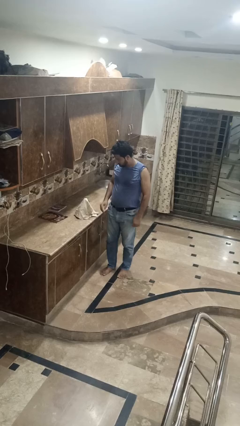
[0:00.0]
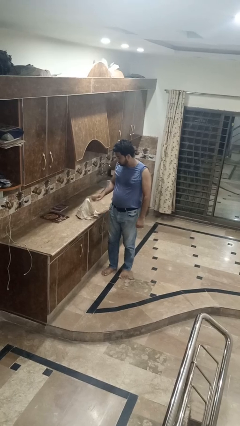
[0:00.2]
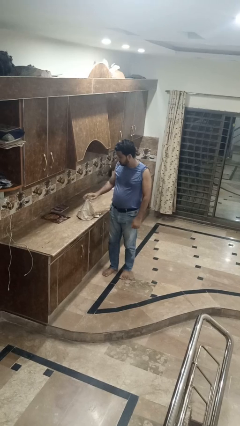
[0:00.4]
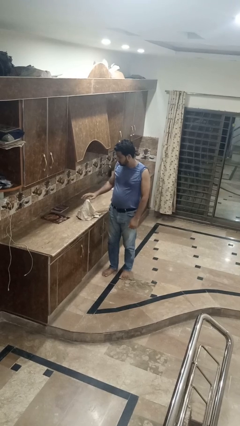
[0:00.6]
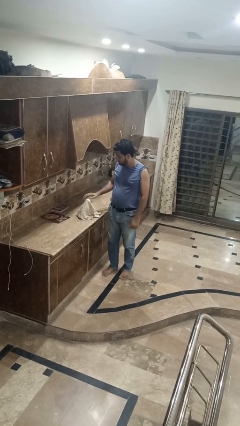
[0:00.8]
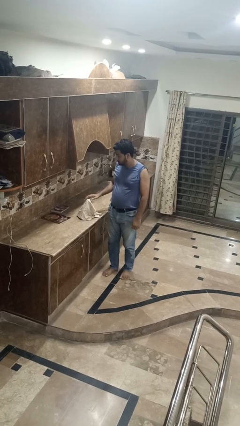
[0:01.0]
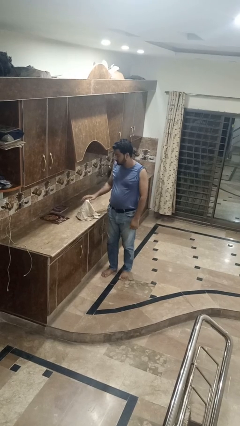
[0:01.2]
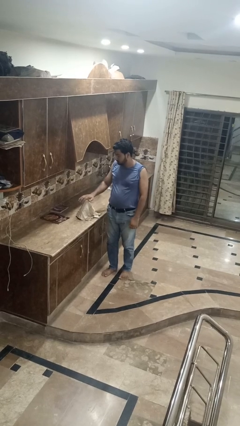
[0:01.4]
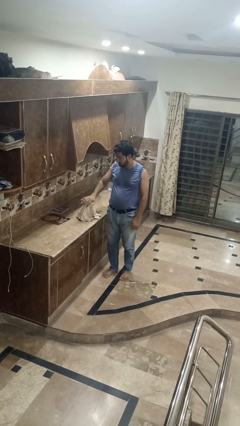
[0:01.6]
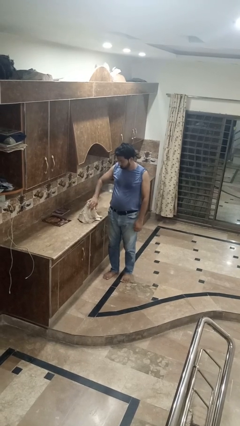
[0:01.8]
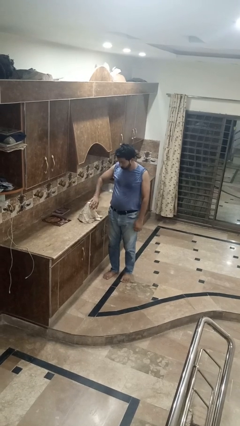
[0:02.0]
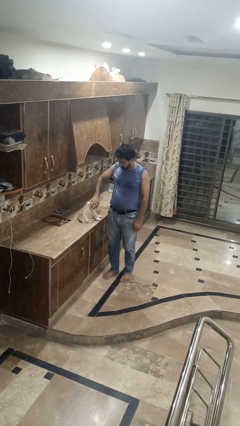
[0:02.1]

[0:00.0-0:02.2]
person waves hand over object

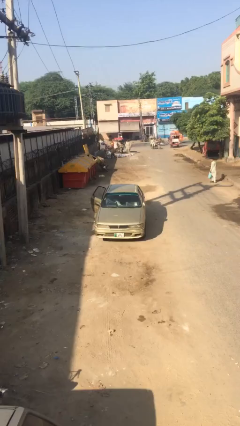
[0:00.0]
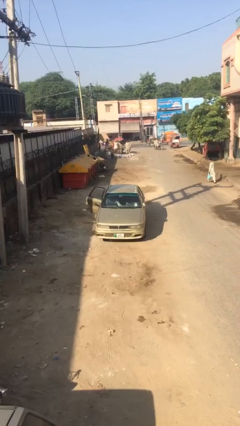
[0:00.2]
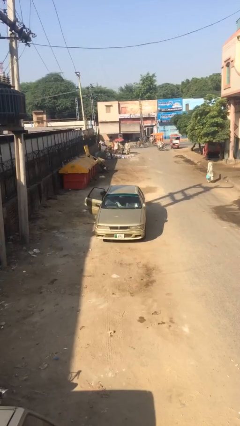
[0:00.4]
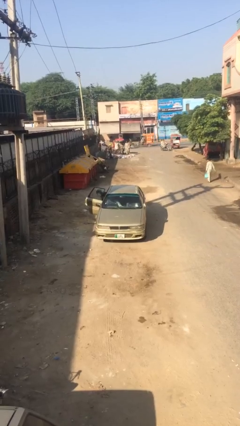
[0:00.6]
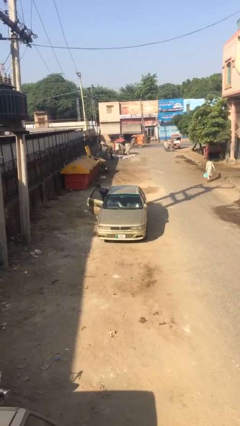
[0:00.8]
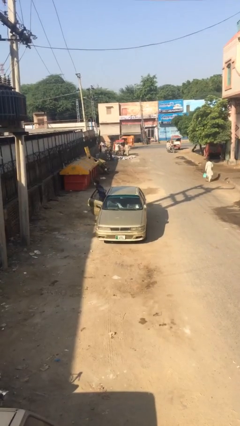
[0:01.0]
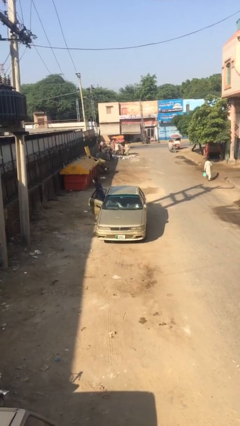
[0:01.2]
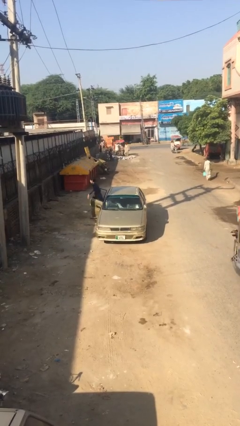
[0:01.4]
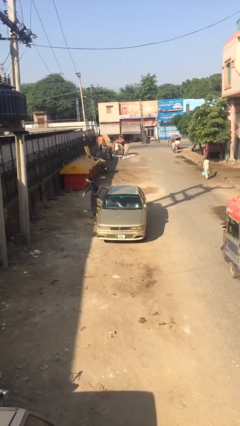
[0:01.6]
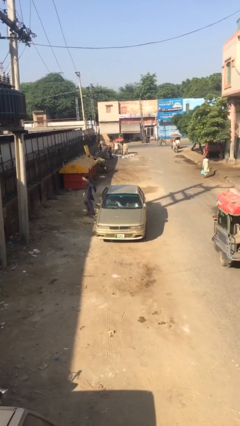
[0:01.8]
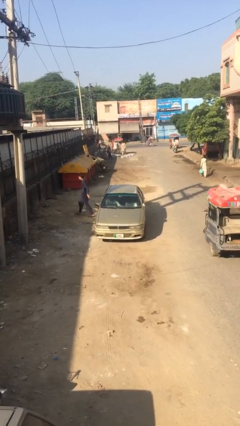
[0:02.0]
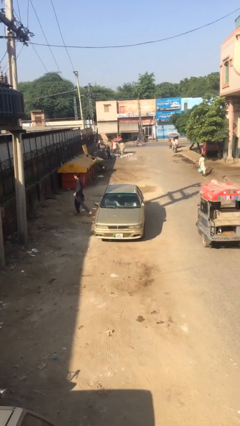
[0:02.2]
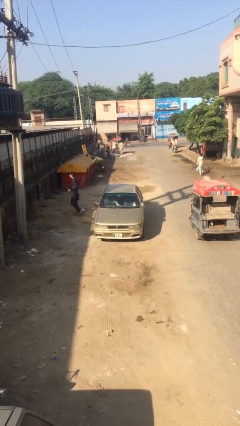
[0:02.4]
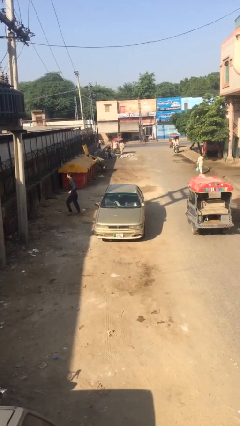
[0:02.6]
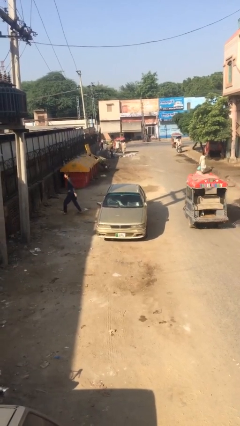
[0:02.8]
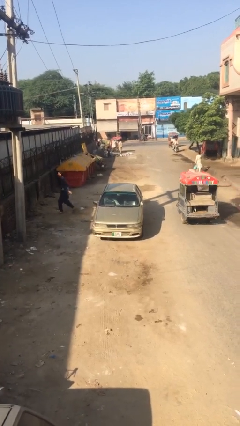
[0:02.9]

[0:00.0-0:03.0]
car drops off person

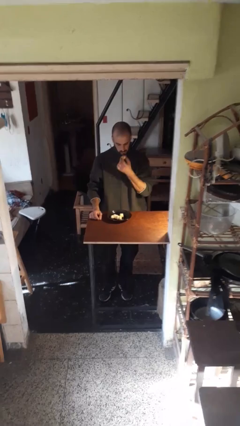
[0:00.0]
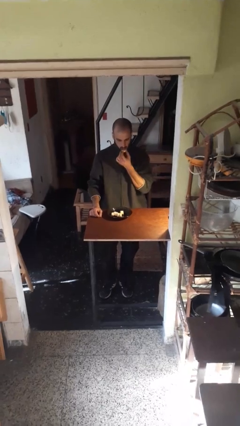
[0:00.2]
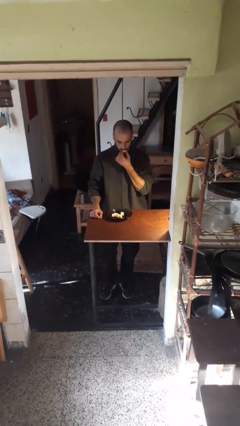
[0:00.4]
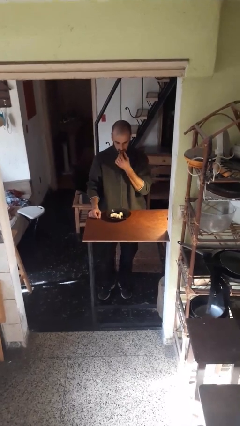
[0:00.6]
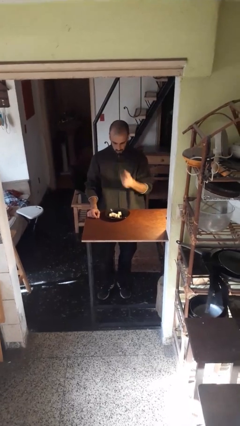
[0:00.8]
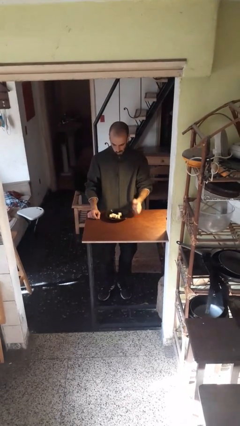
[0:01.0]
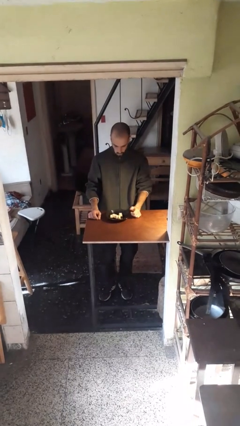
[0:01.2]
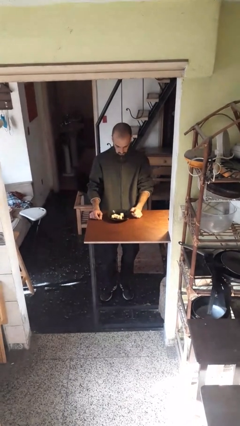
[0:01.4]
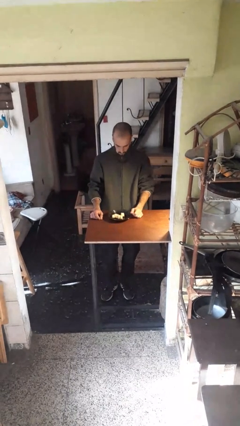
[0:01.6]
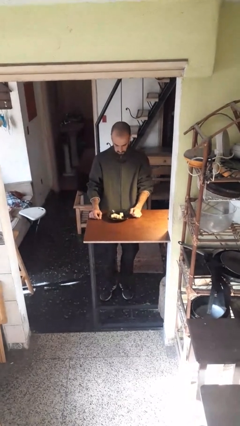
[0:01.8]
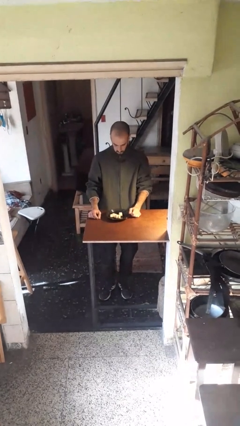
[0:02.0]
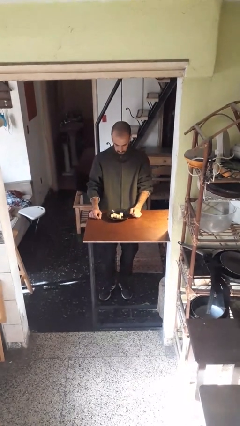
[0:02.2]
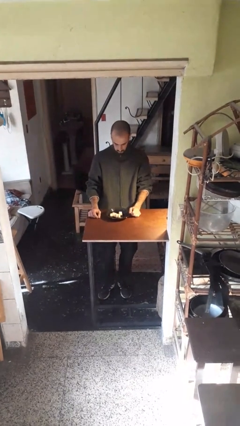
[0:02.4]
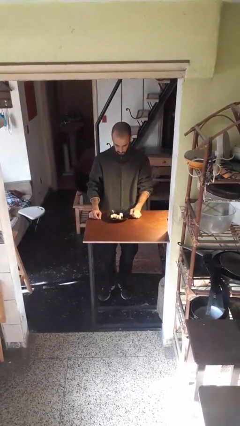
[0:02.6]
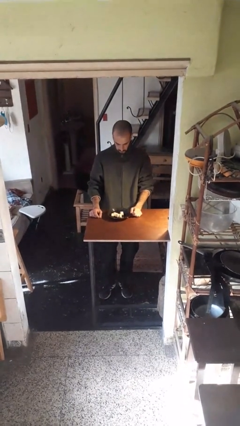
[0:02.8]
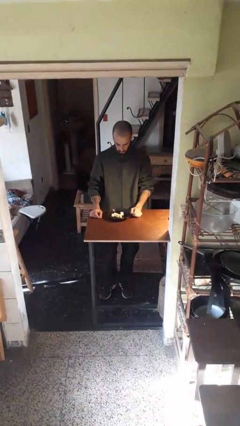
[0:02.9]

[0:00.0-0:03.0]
person eats with hands

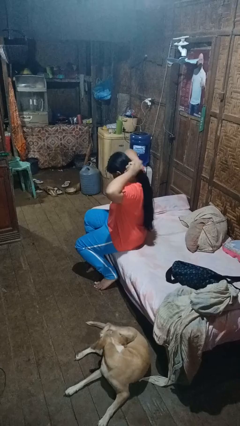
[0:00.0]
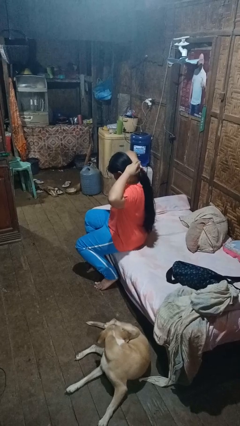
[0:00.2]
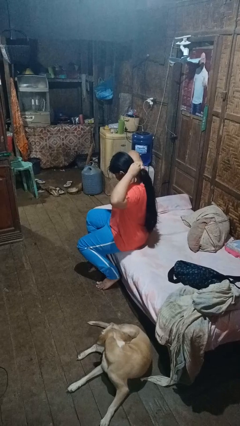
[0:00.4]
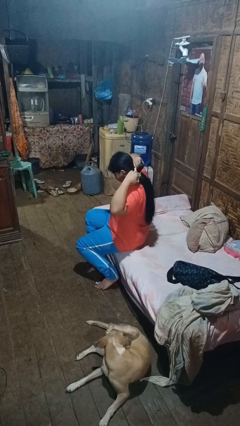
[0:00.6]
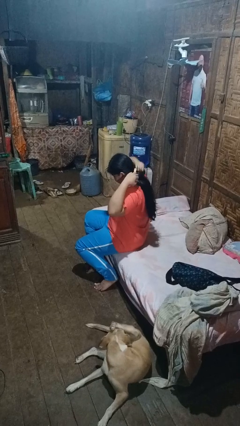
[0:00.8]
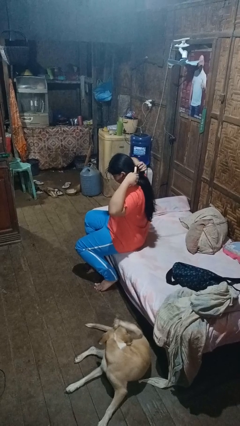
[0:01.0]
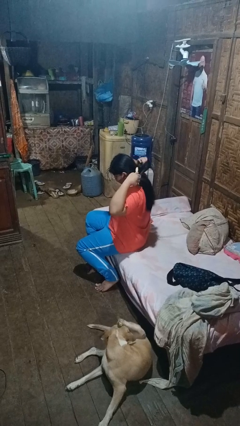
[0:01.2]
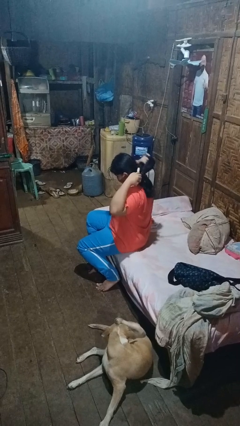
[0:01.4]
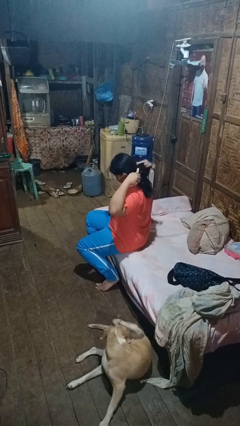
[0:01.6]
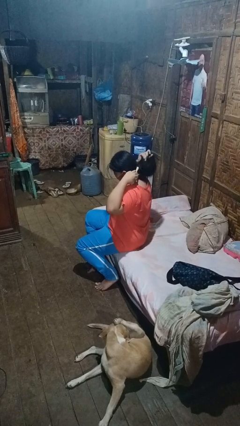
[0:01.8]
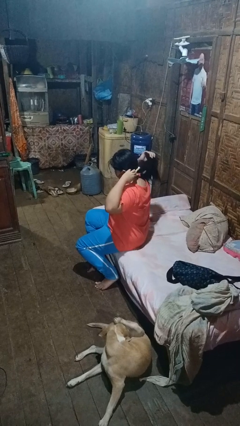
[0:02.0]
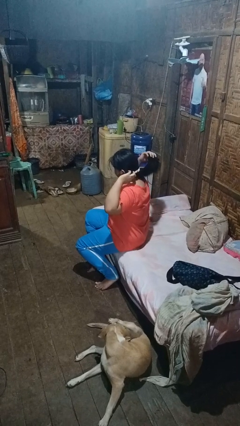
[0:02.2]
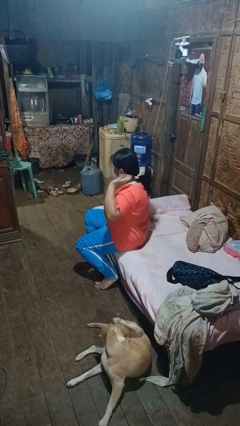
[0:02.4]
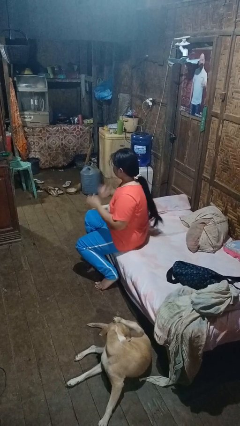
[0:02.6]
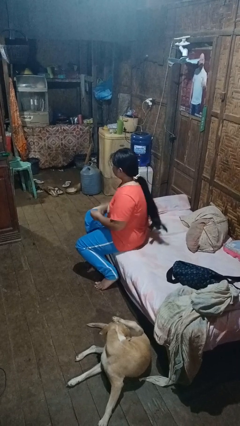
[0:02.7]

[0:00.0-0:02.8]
person puts hair in ponytail

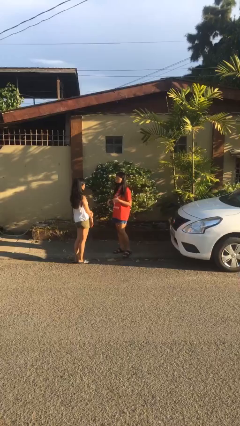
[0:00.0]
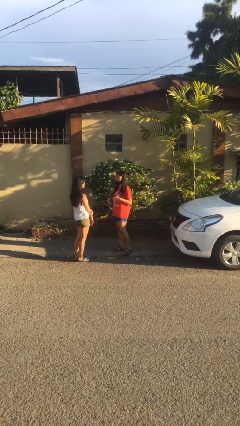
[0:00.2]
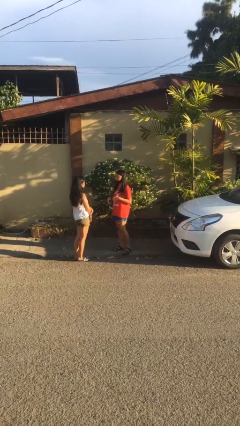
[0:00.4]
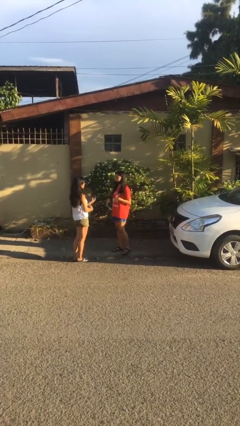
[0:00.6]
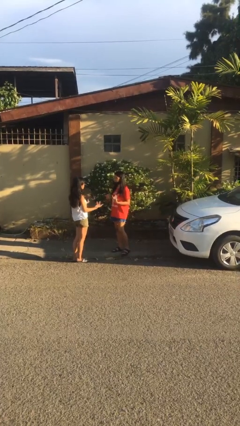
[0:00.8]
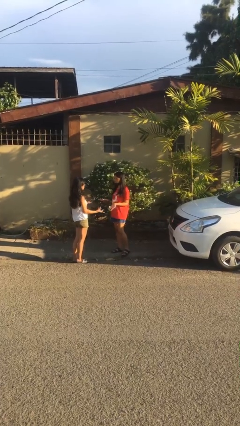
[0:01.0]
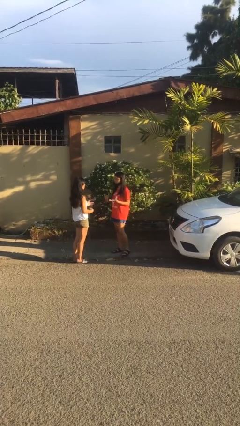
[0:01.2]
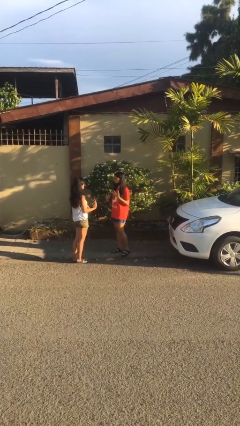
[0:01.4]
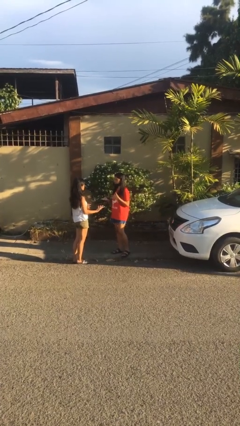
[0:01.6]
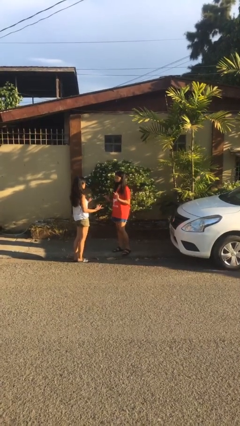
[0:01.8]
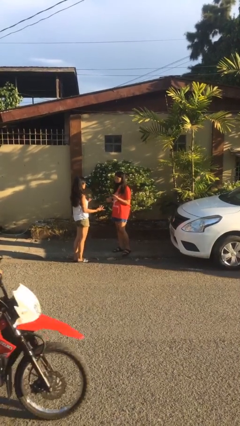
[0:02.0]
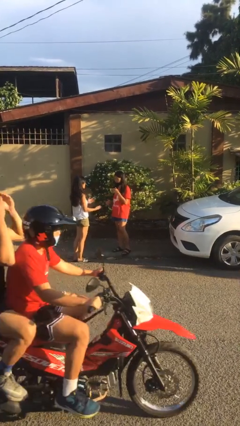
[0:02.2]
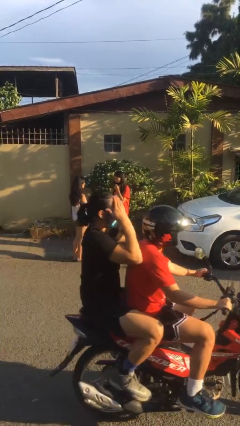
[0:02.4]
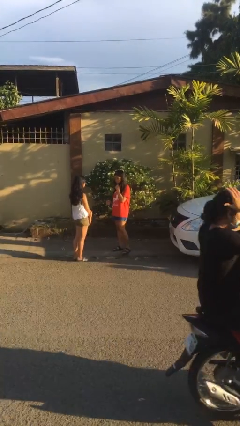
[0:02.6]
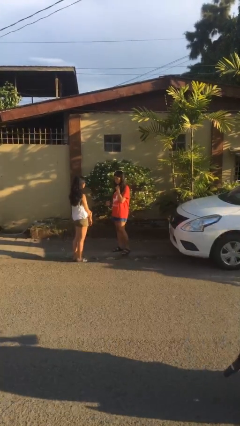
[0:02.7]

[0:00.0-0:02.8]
person talks to person

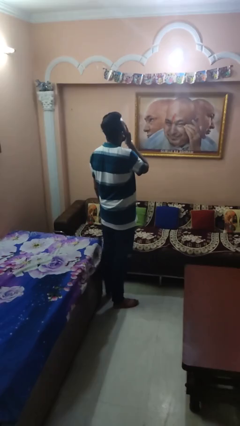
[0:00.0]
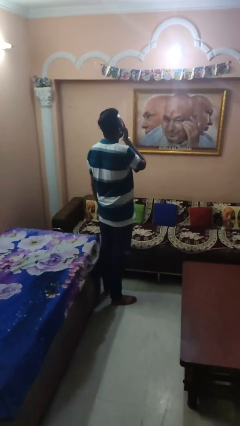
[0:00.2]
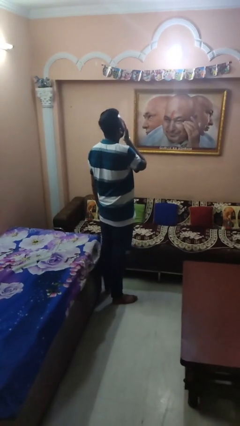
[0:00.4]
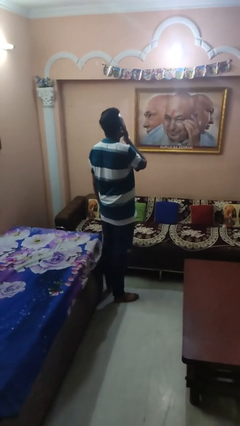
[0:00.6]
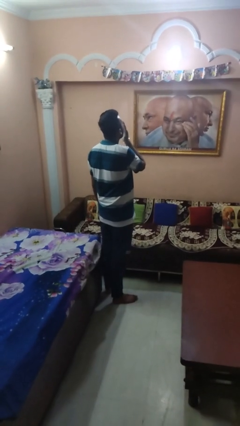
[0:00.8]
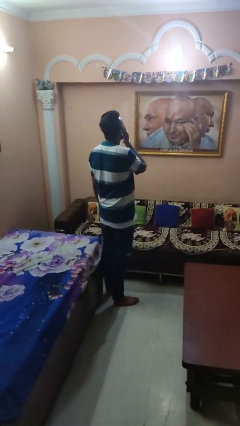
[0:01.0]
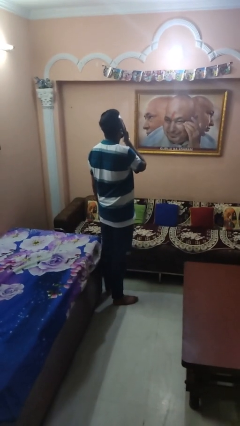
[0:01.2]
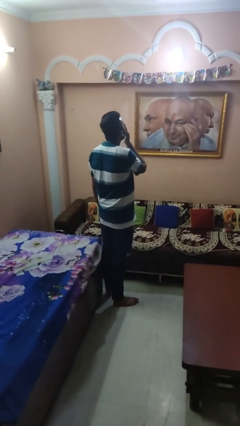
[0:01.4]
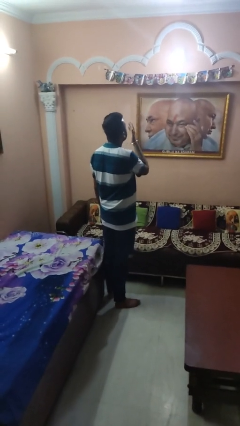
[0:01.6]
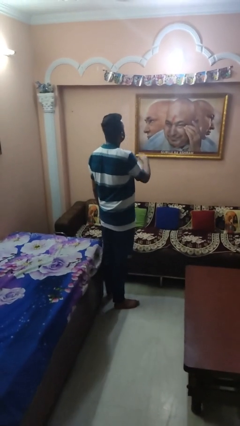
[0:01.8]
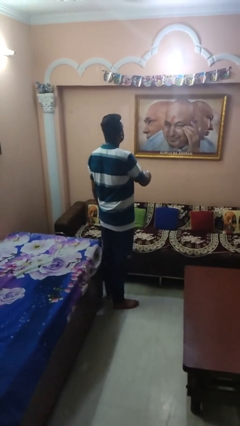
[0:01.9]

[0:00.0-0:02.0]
person yawns

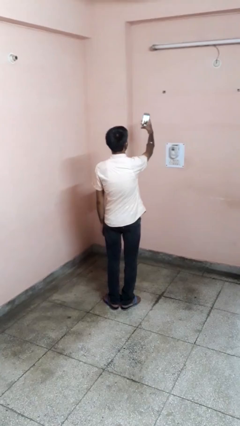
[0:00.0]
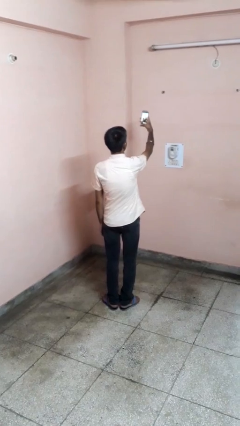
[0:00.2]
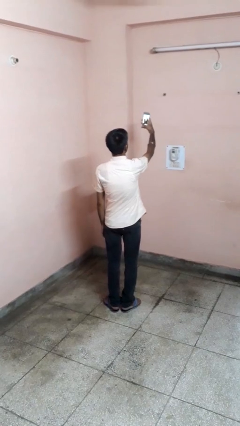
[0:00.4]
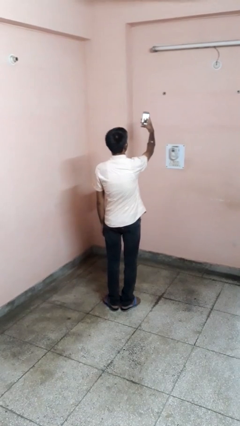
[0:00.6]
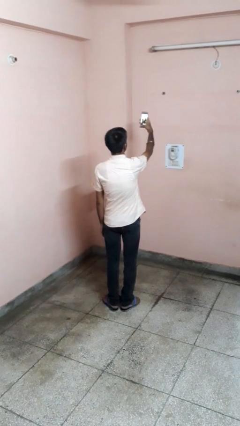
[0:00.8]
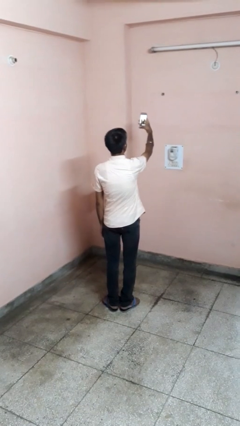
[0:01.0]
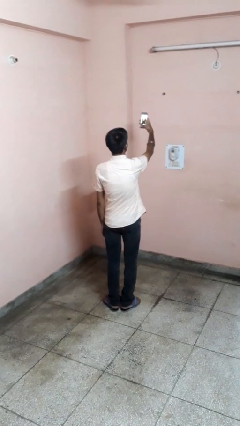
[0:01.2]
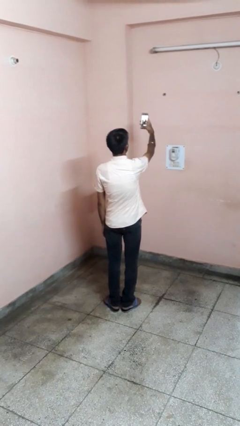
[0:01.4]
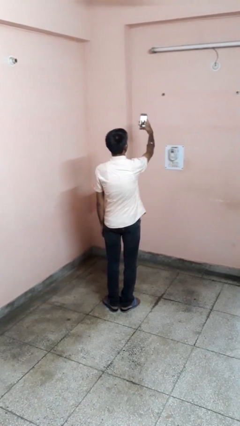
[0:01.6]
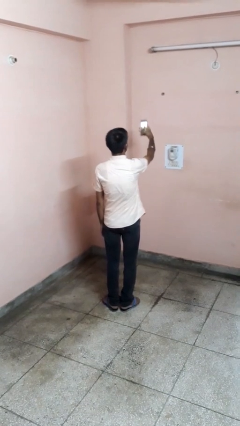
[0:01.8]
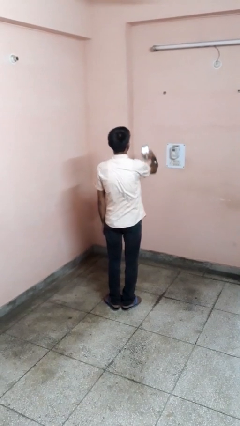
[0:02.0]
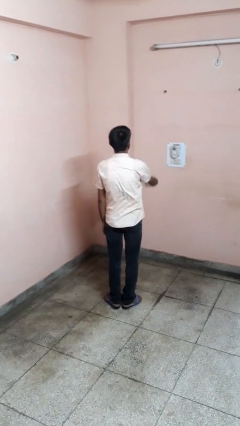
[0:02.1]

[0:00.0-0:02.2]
person takes selfie
